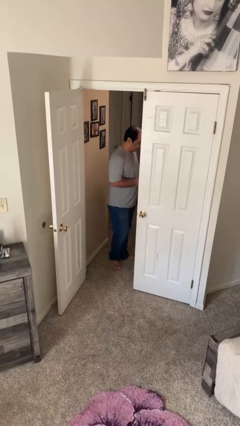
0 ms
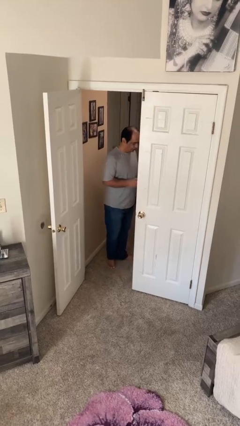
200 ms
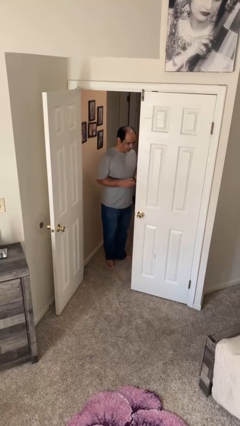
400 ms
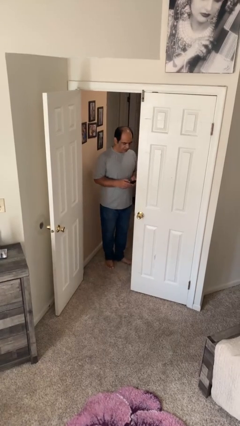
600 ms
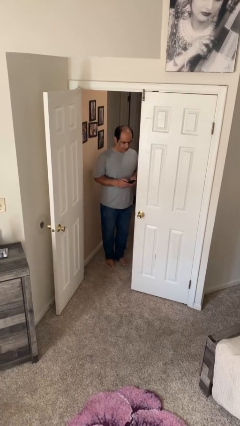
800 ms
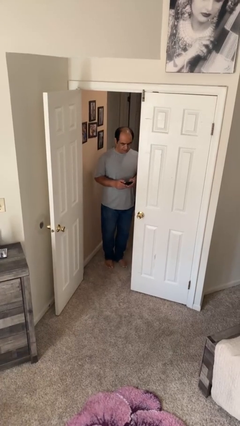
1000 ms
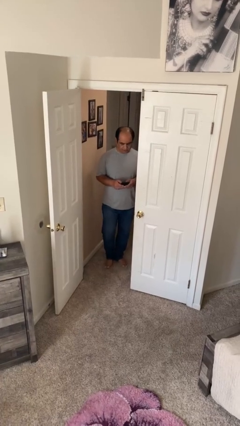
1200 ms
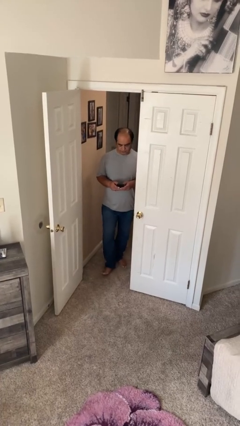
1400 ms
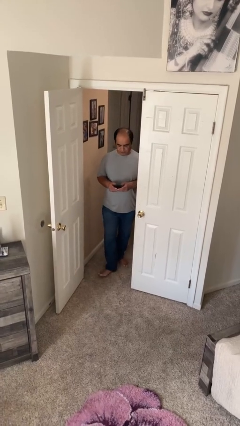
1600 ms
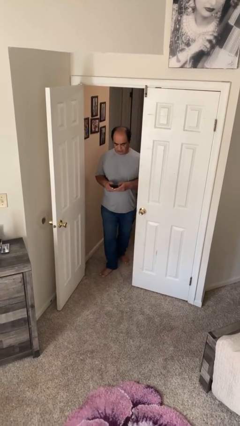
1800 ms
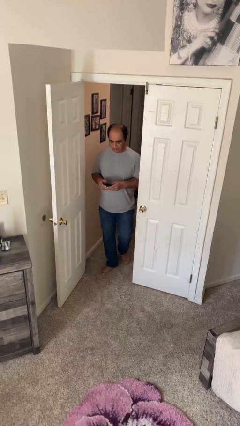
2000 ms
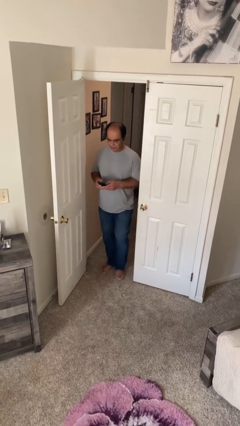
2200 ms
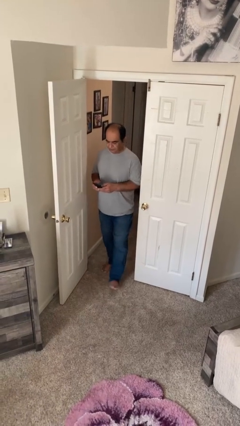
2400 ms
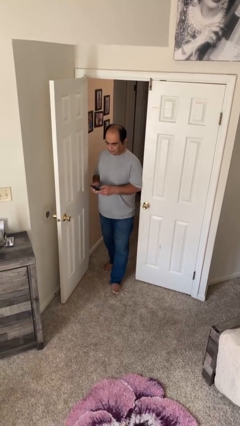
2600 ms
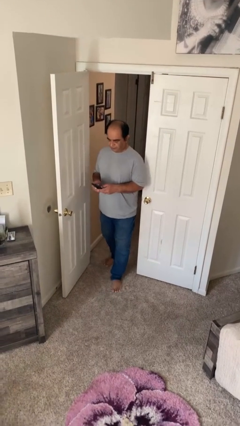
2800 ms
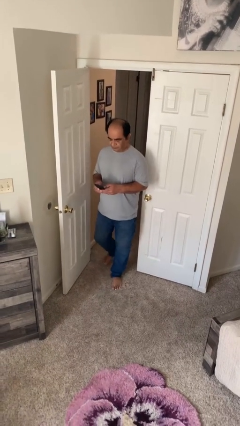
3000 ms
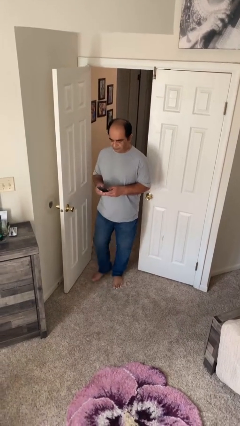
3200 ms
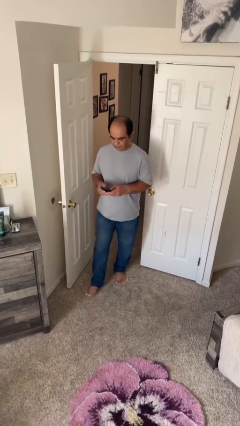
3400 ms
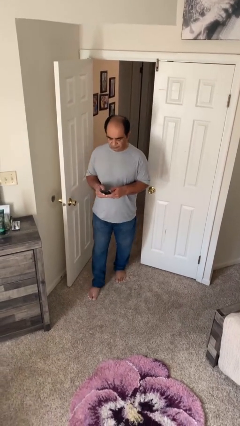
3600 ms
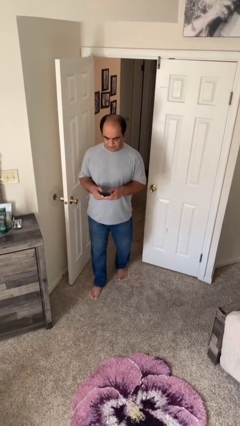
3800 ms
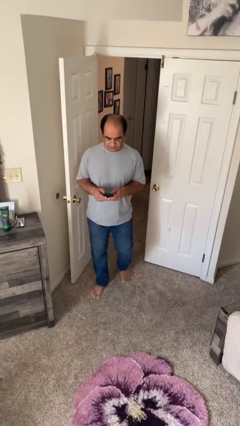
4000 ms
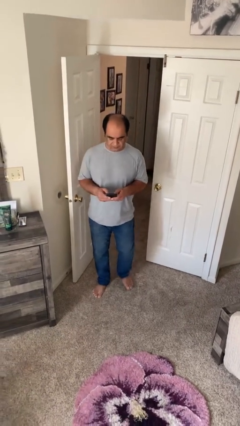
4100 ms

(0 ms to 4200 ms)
person enters scene through structure

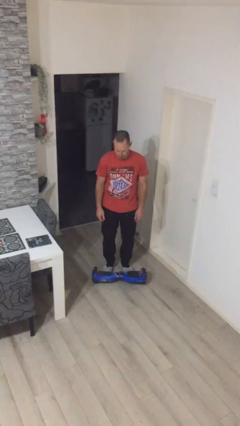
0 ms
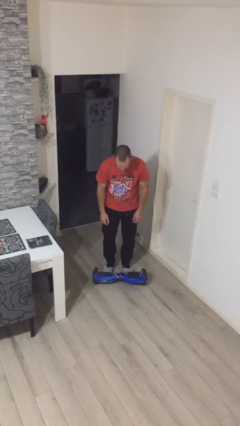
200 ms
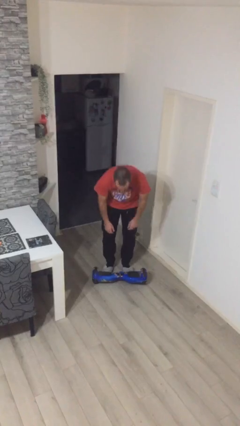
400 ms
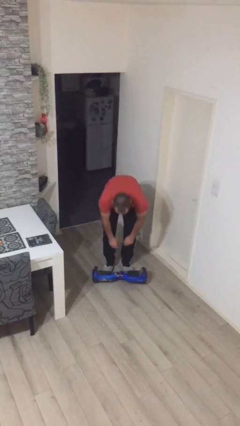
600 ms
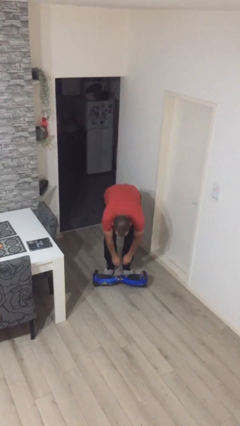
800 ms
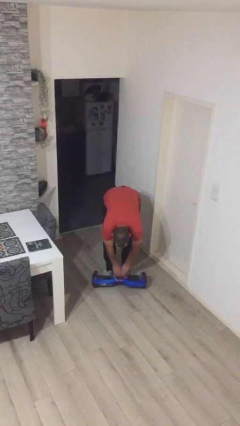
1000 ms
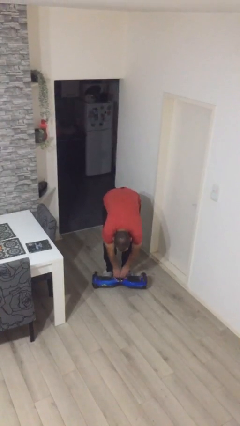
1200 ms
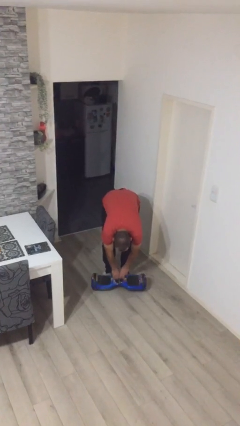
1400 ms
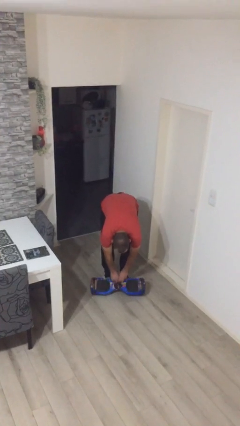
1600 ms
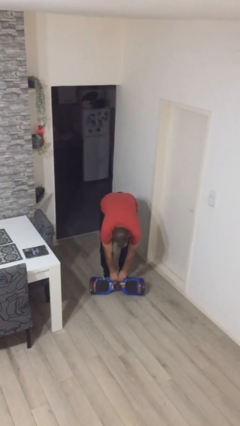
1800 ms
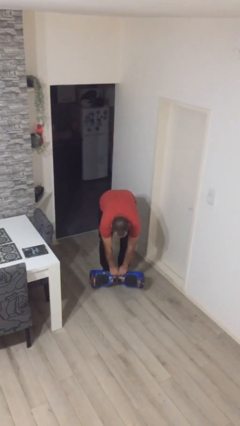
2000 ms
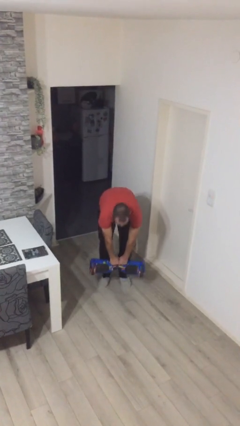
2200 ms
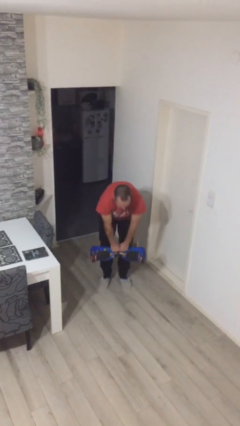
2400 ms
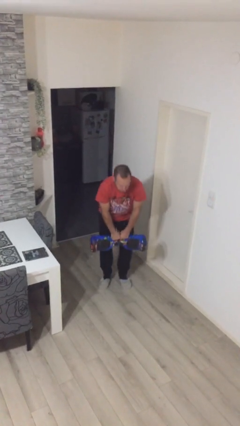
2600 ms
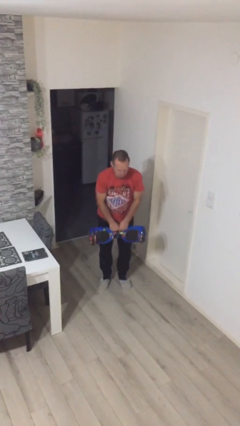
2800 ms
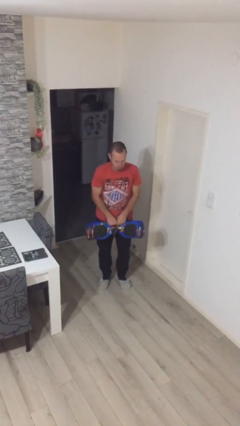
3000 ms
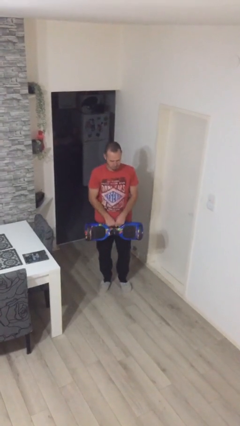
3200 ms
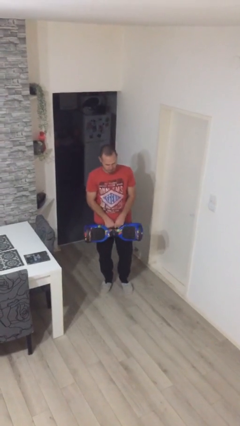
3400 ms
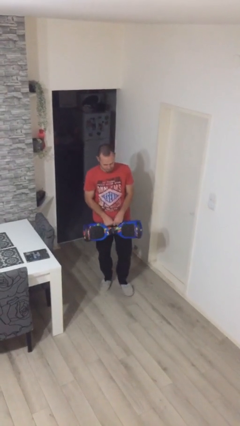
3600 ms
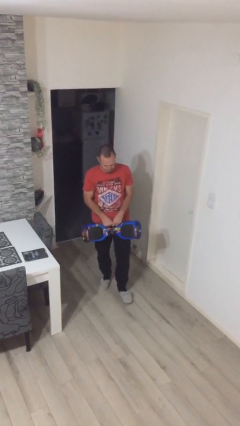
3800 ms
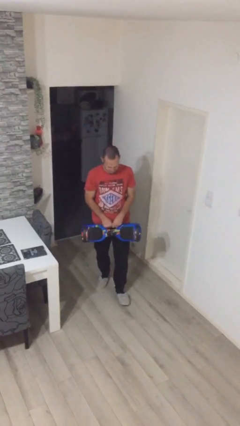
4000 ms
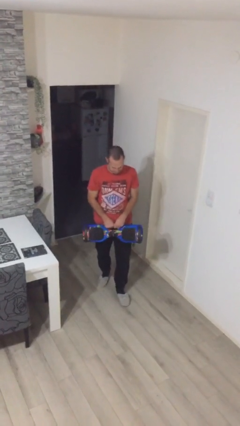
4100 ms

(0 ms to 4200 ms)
person picks up object from floor

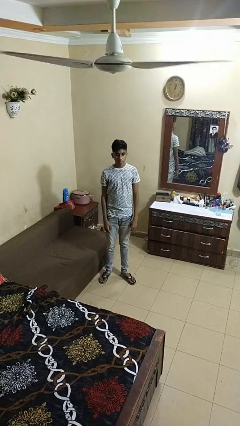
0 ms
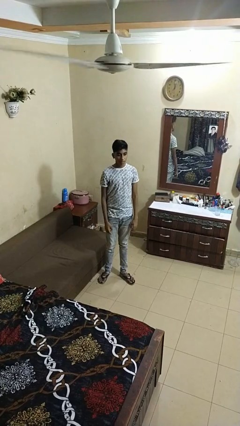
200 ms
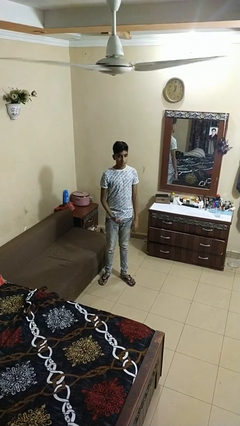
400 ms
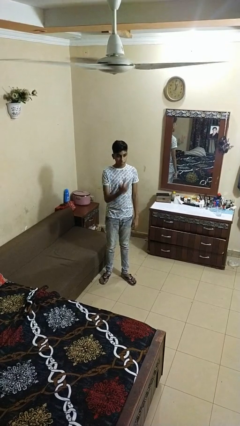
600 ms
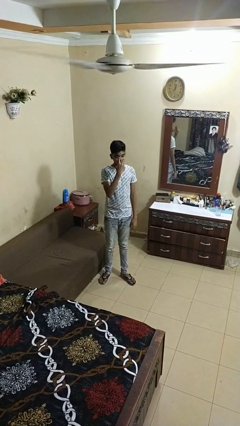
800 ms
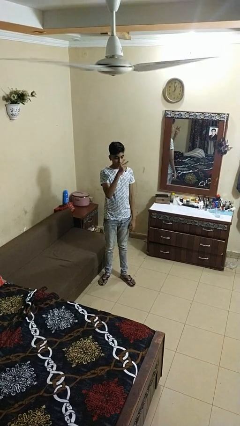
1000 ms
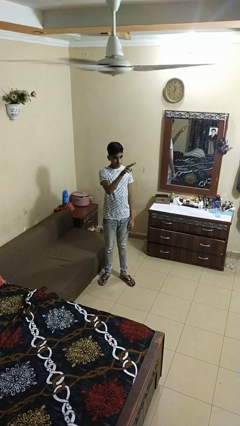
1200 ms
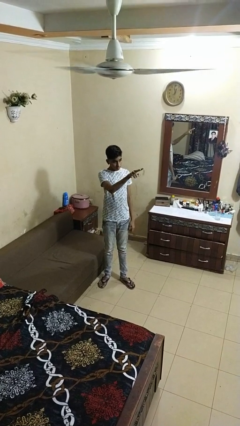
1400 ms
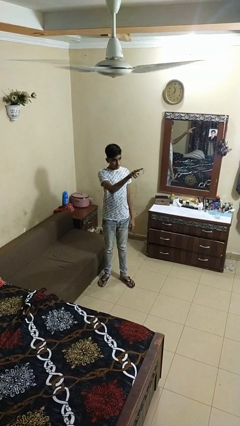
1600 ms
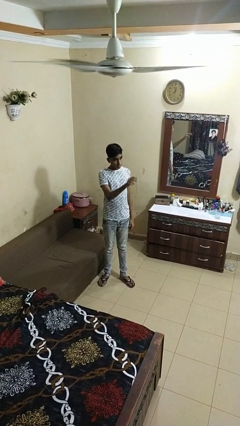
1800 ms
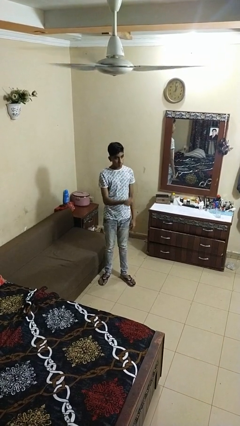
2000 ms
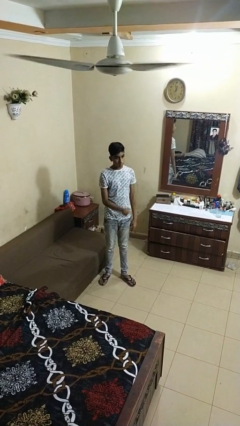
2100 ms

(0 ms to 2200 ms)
person gestures watch closely

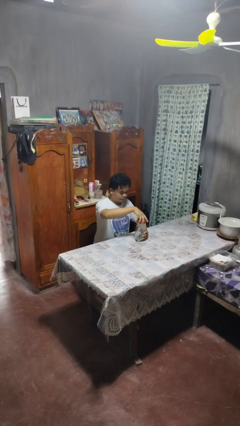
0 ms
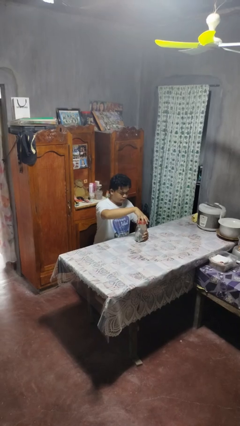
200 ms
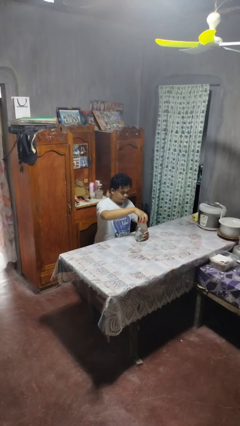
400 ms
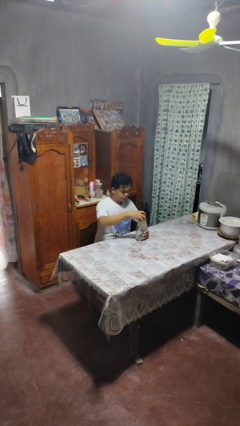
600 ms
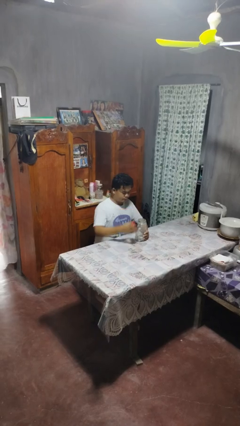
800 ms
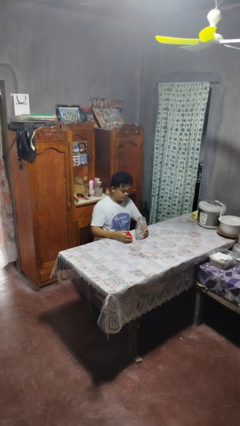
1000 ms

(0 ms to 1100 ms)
person opens jar

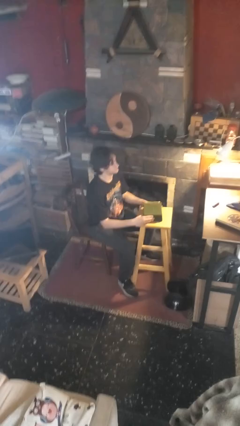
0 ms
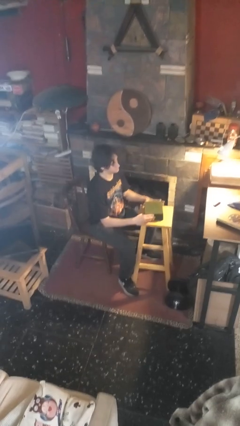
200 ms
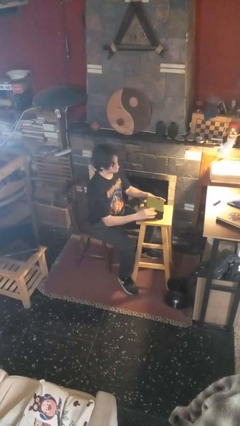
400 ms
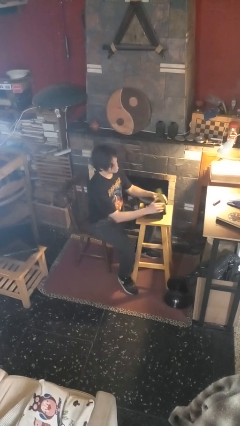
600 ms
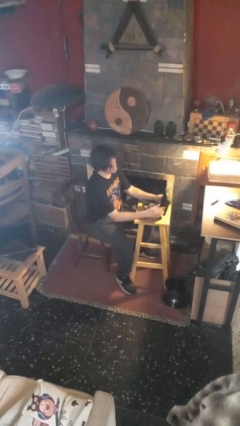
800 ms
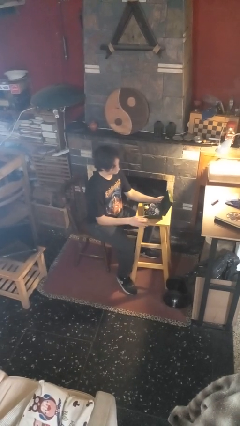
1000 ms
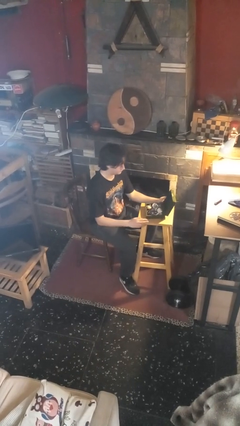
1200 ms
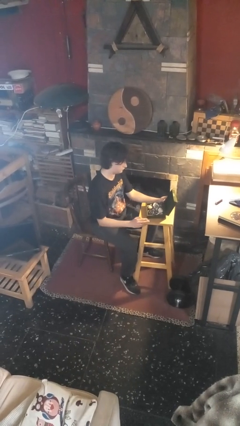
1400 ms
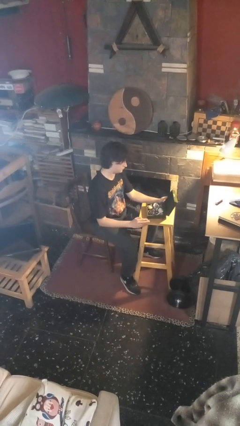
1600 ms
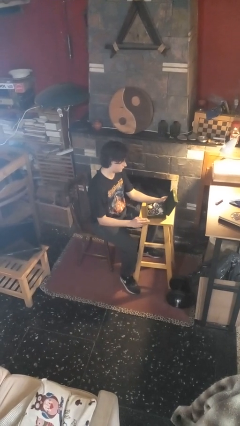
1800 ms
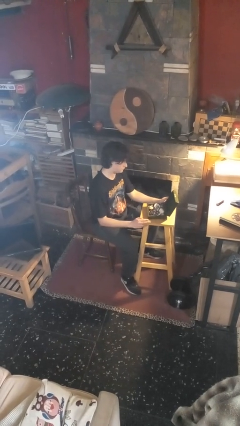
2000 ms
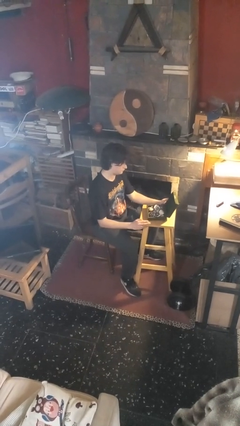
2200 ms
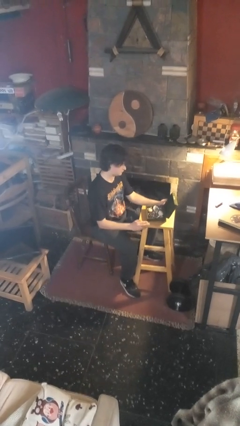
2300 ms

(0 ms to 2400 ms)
person opens jewelry box

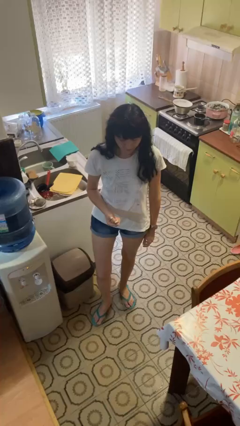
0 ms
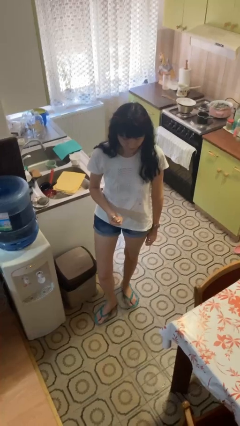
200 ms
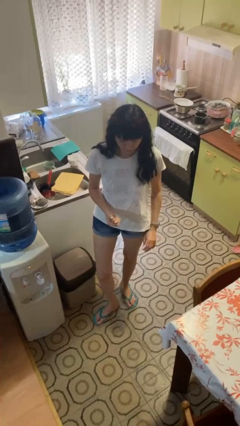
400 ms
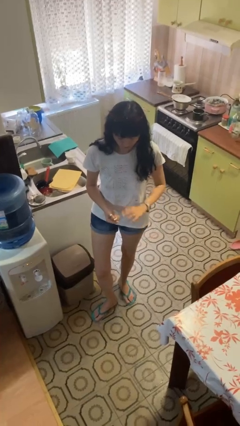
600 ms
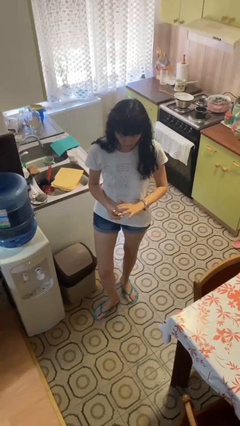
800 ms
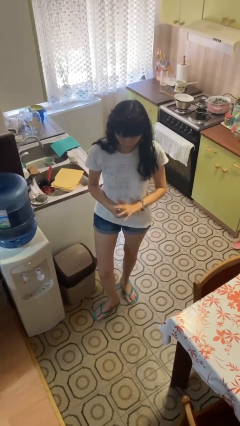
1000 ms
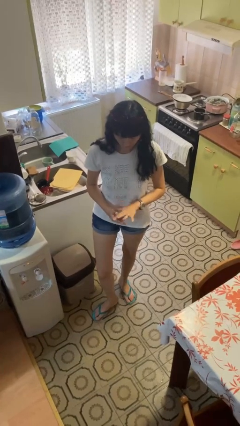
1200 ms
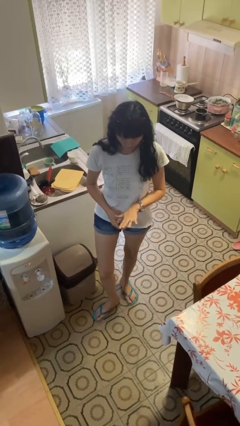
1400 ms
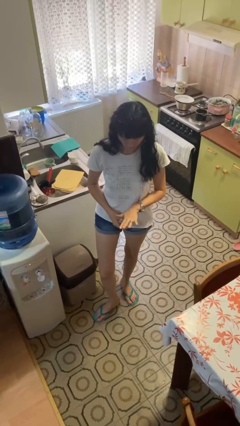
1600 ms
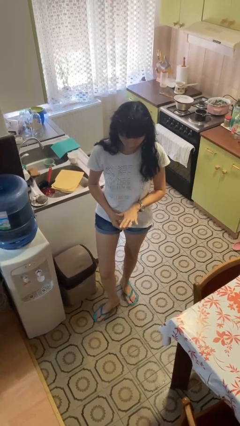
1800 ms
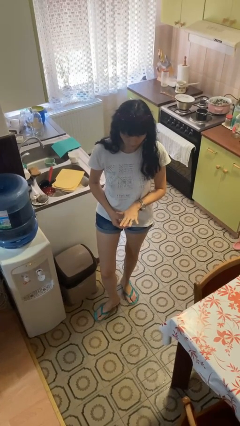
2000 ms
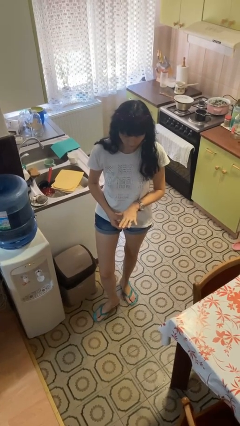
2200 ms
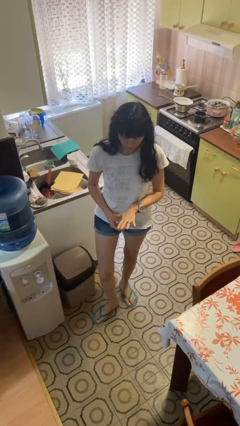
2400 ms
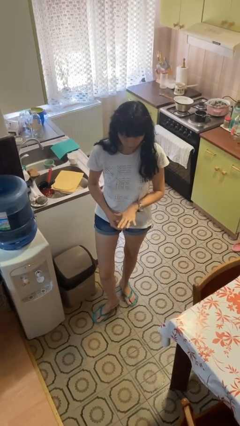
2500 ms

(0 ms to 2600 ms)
person puts on ring

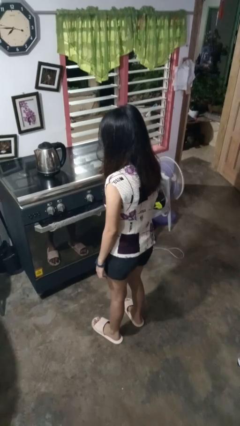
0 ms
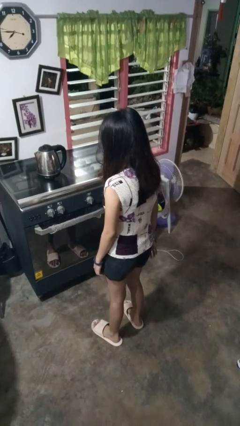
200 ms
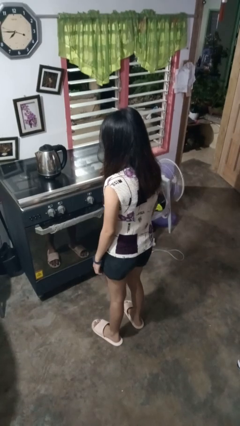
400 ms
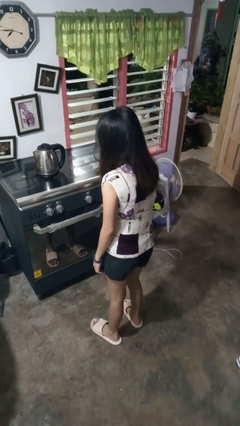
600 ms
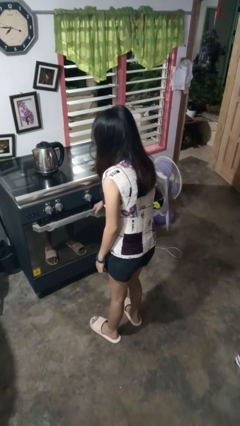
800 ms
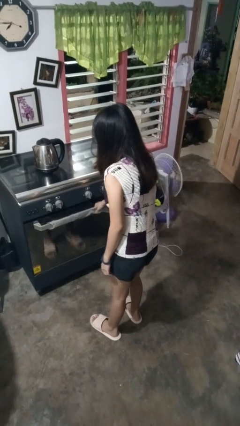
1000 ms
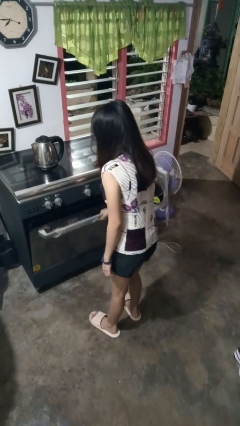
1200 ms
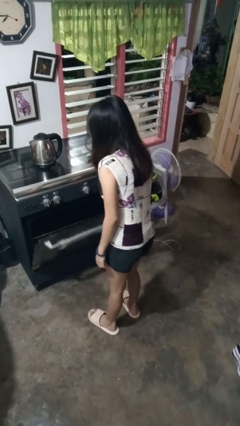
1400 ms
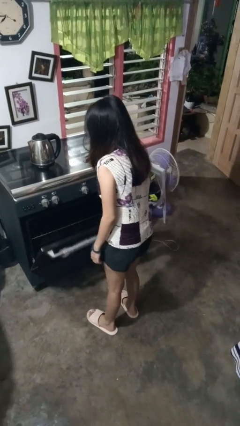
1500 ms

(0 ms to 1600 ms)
person opens oven door
